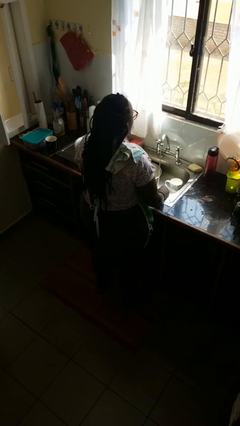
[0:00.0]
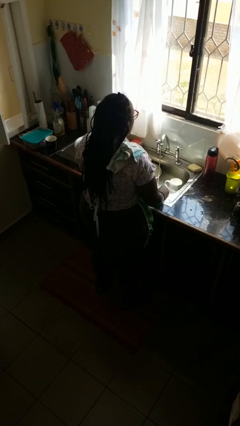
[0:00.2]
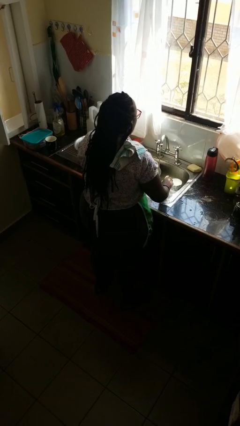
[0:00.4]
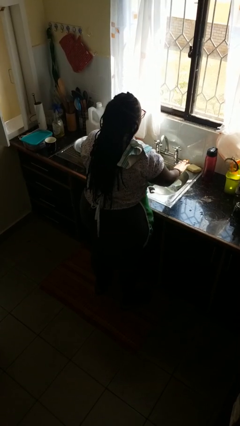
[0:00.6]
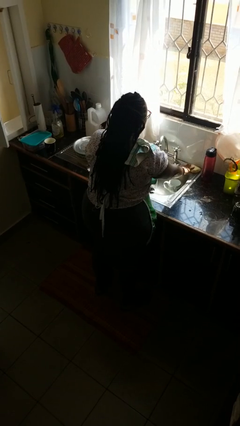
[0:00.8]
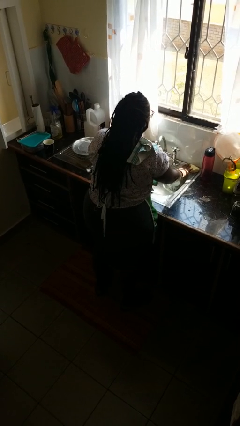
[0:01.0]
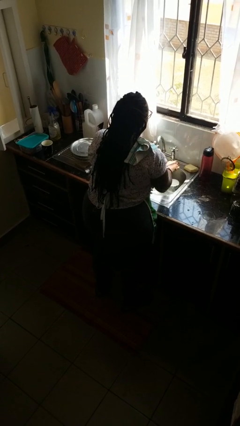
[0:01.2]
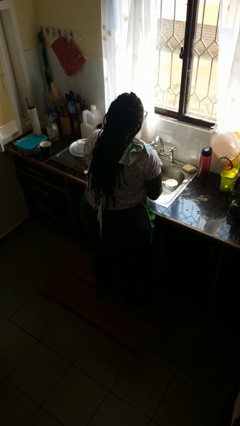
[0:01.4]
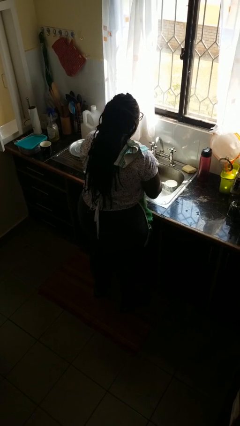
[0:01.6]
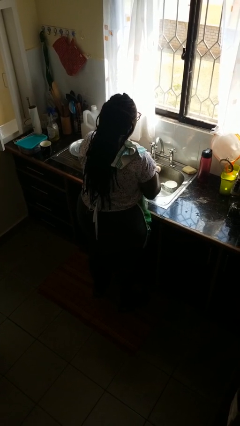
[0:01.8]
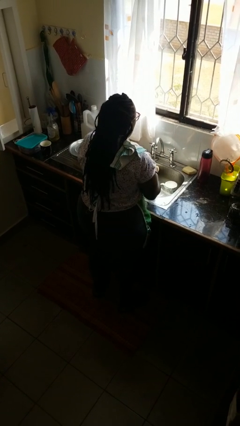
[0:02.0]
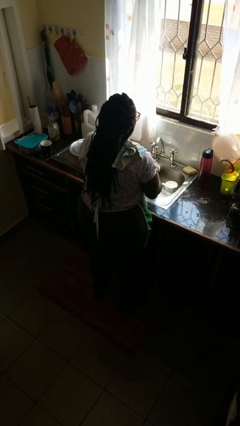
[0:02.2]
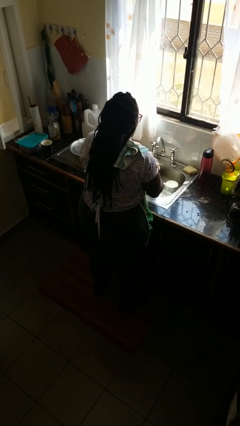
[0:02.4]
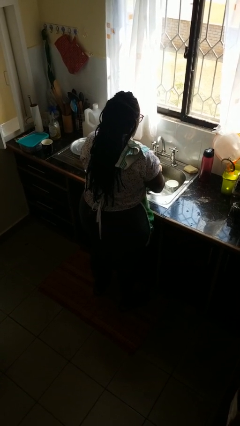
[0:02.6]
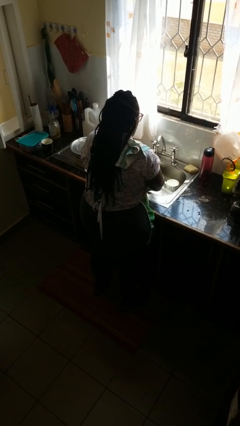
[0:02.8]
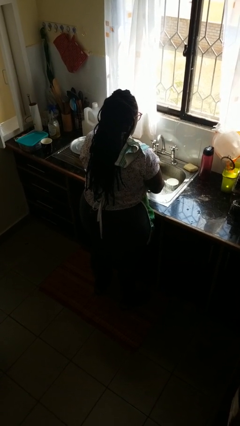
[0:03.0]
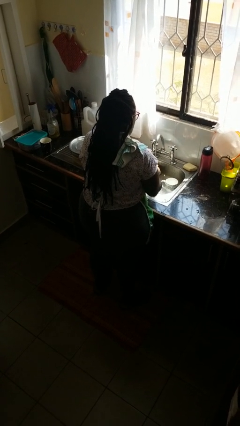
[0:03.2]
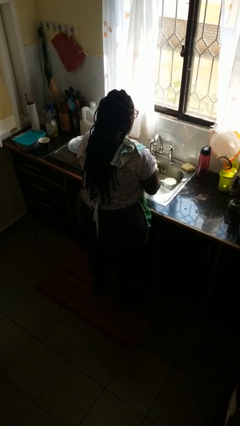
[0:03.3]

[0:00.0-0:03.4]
person washes hands

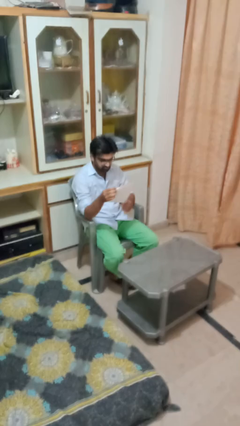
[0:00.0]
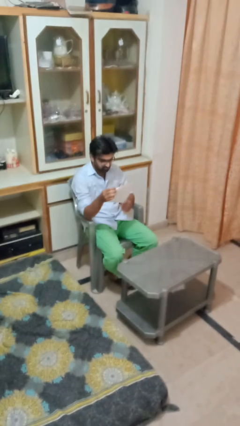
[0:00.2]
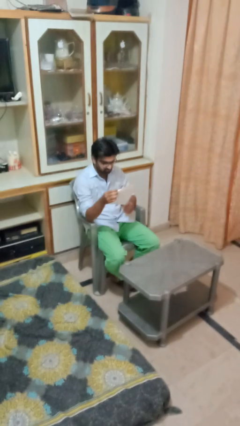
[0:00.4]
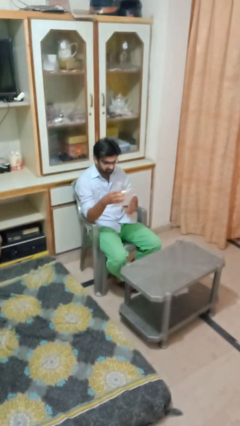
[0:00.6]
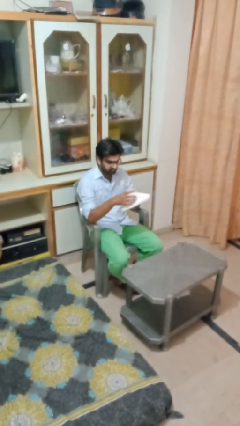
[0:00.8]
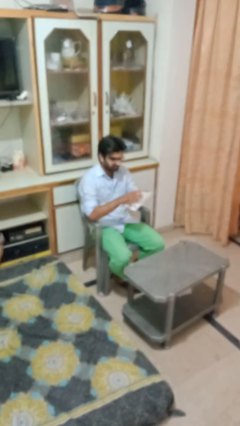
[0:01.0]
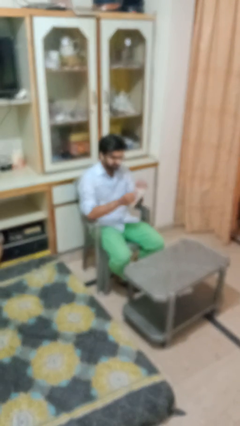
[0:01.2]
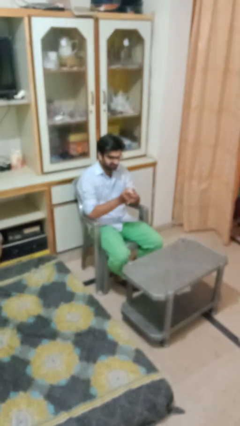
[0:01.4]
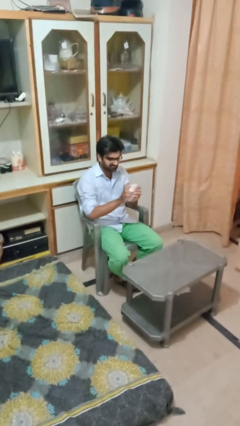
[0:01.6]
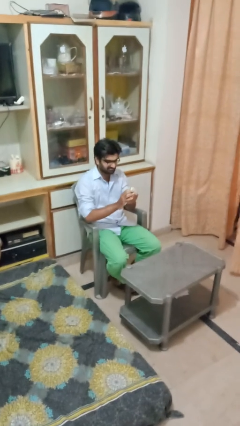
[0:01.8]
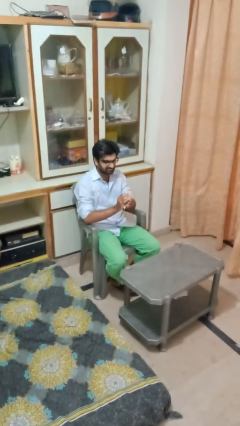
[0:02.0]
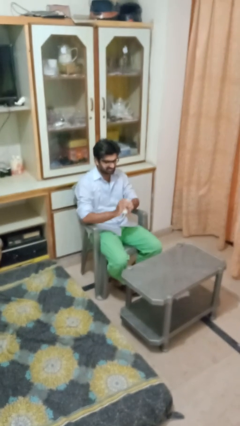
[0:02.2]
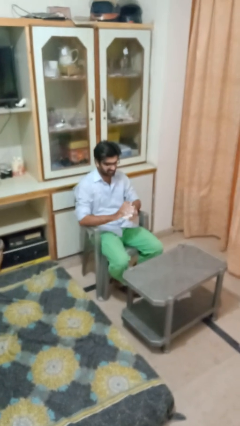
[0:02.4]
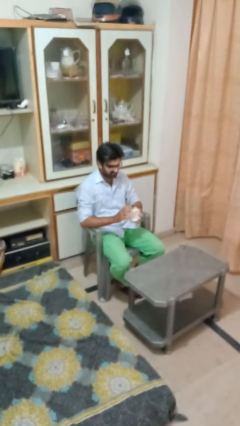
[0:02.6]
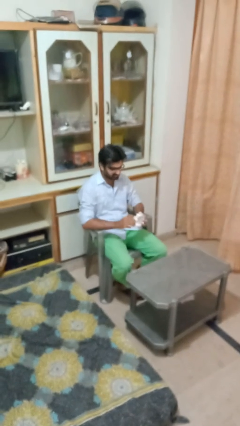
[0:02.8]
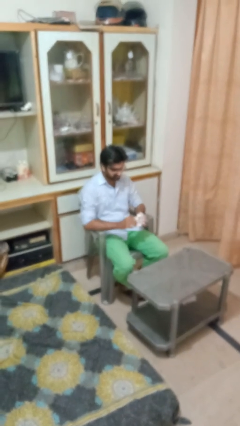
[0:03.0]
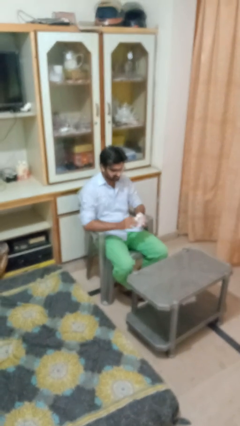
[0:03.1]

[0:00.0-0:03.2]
person crumples paper

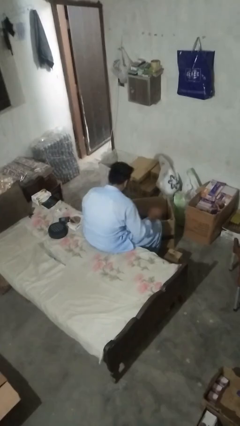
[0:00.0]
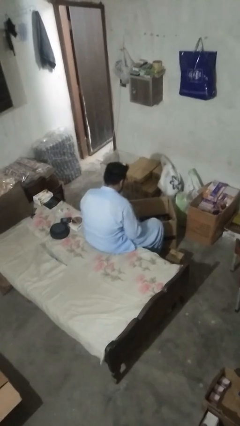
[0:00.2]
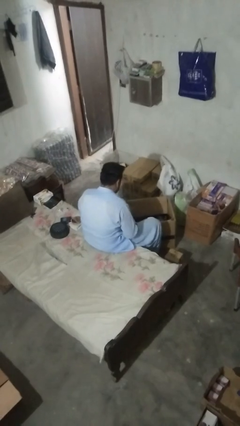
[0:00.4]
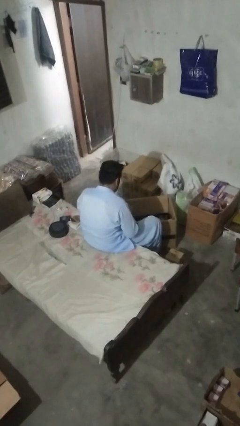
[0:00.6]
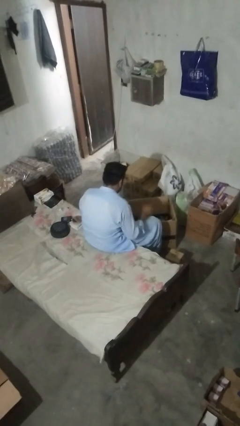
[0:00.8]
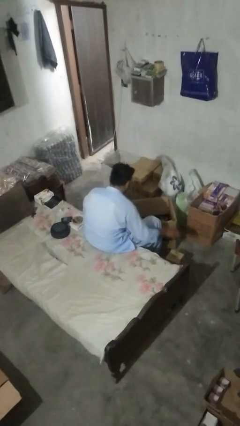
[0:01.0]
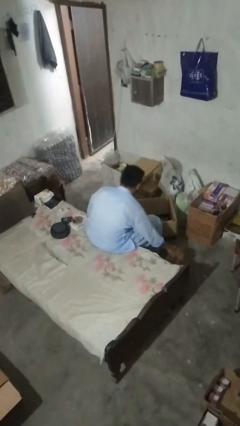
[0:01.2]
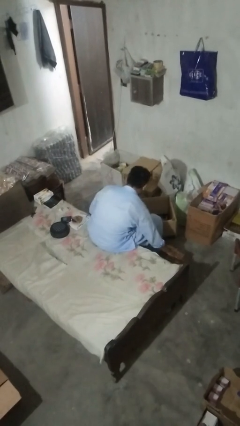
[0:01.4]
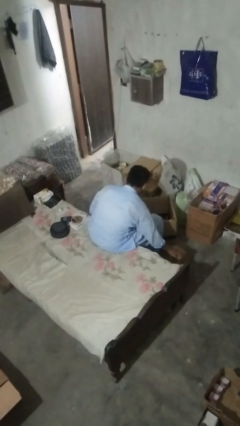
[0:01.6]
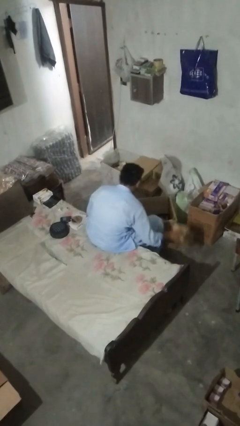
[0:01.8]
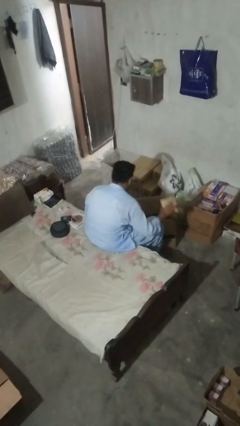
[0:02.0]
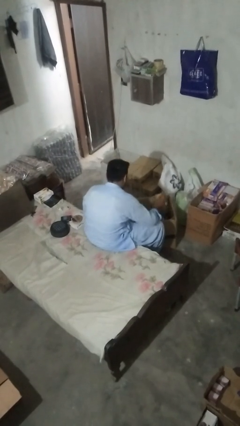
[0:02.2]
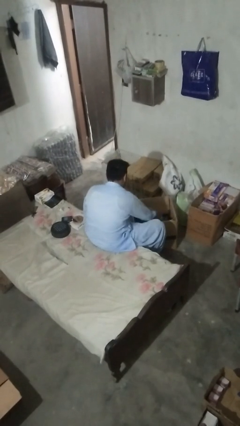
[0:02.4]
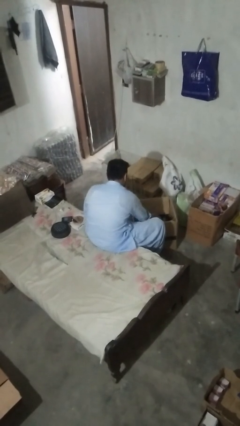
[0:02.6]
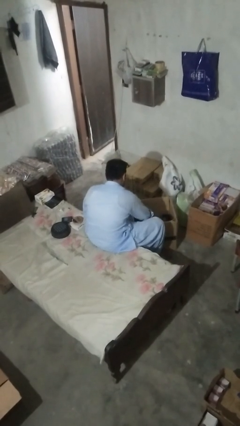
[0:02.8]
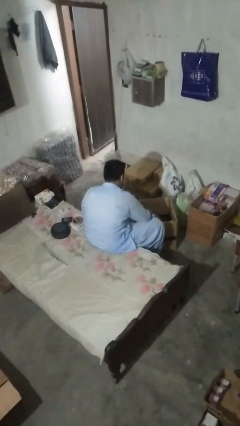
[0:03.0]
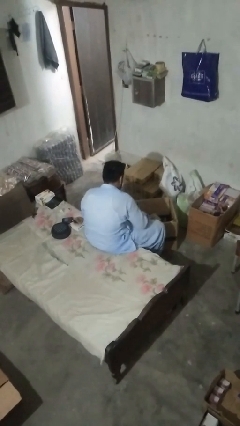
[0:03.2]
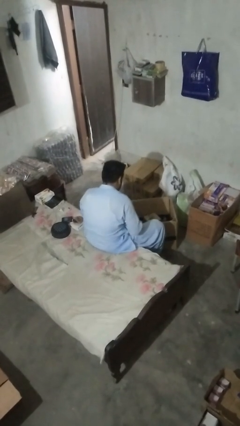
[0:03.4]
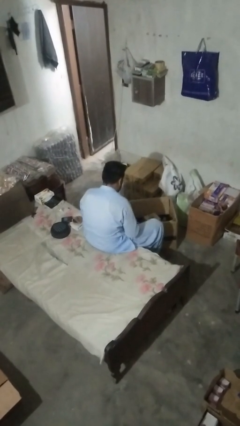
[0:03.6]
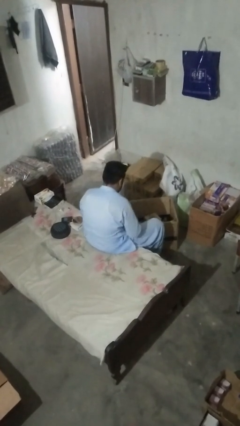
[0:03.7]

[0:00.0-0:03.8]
person puts object into box

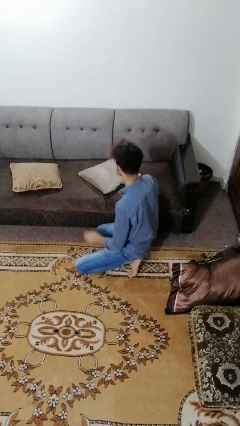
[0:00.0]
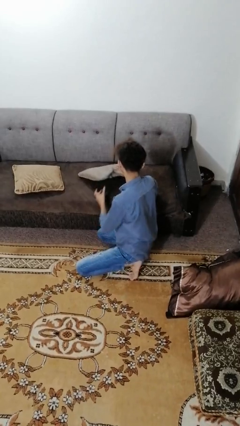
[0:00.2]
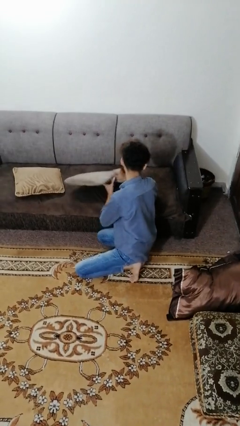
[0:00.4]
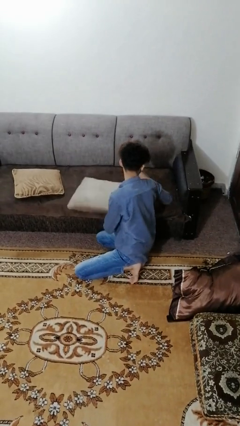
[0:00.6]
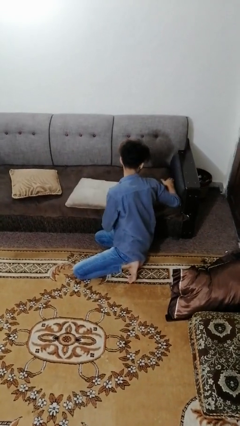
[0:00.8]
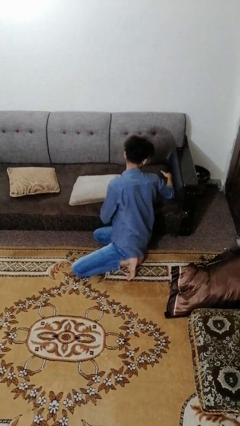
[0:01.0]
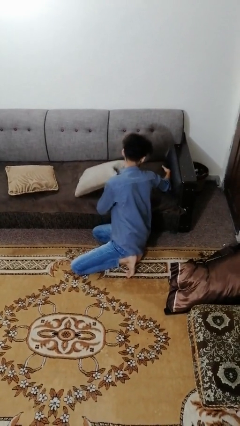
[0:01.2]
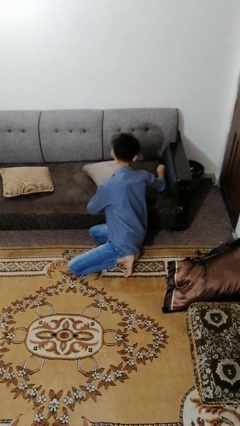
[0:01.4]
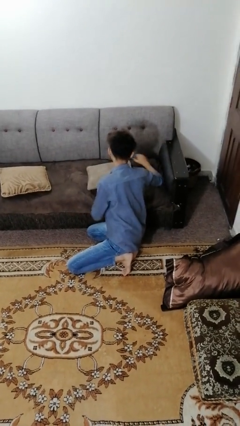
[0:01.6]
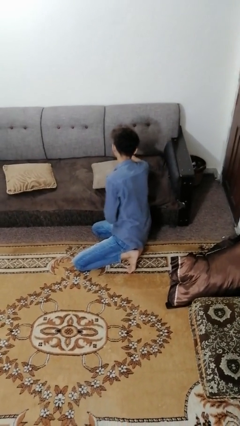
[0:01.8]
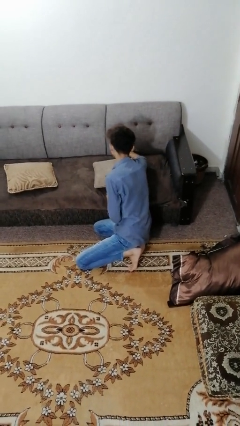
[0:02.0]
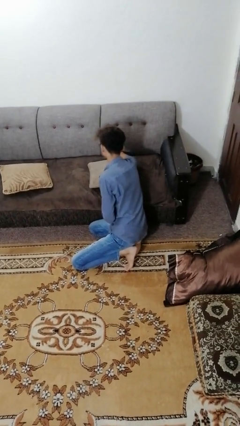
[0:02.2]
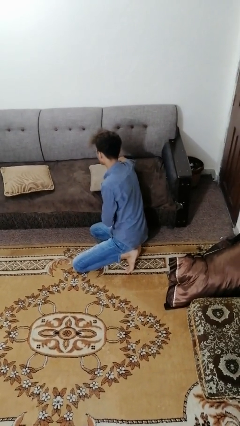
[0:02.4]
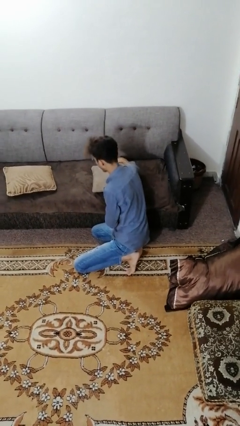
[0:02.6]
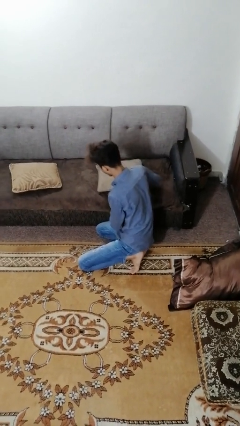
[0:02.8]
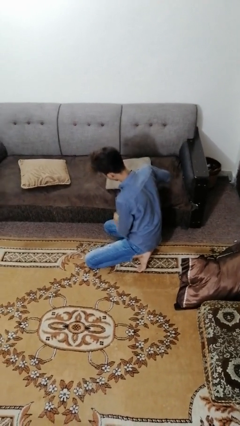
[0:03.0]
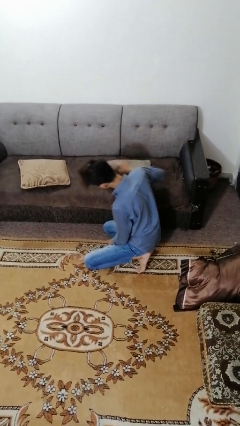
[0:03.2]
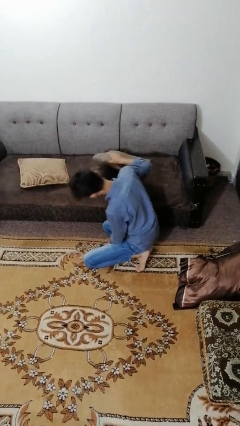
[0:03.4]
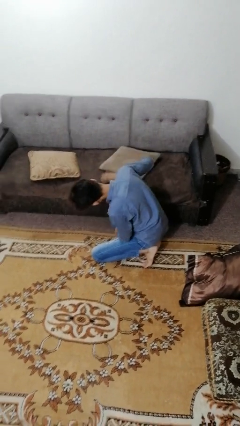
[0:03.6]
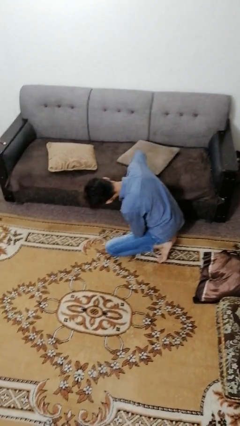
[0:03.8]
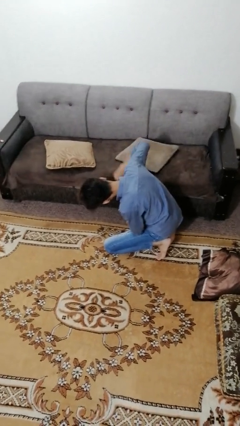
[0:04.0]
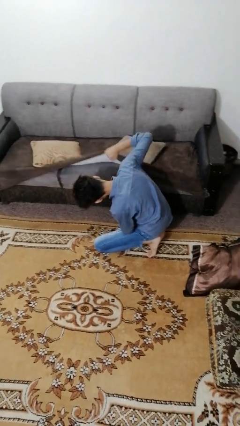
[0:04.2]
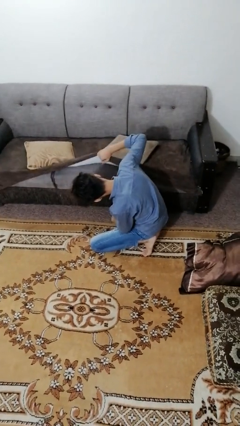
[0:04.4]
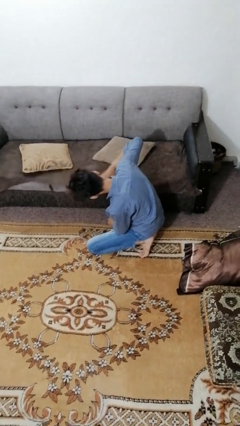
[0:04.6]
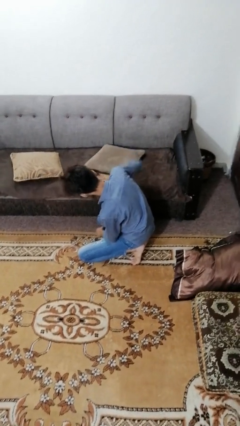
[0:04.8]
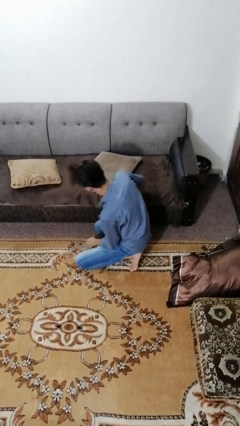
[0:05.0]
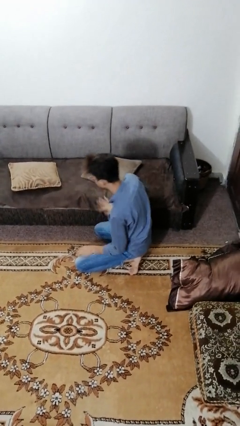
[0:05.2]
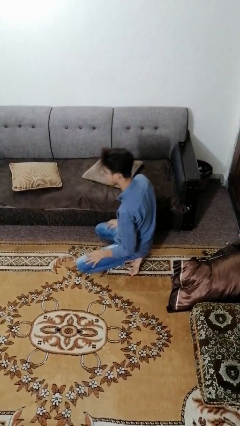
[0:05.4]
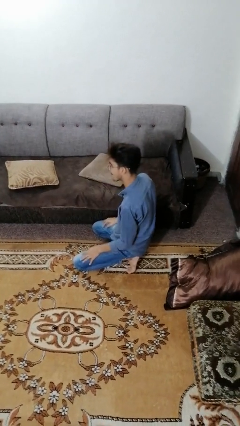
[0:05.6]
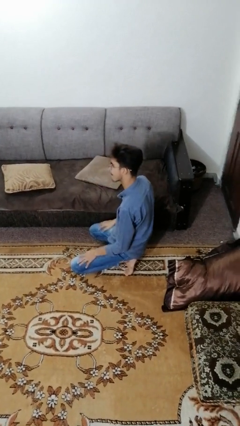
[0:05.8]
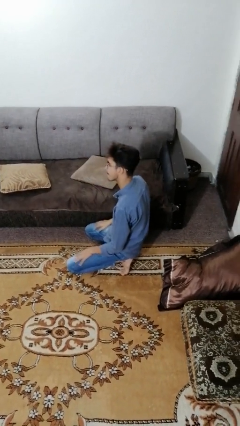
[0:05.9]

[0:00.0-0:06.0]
person searches in couch

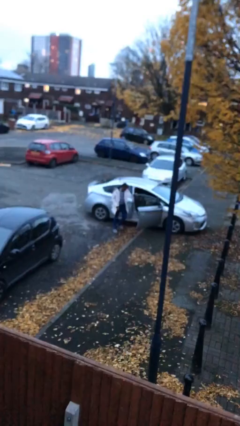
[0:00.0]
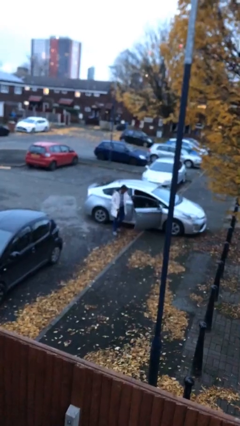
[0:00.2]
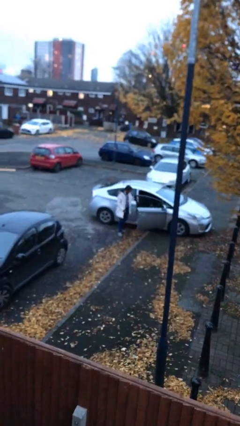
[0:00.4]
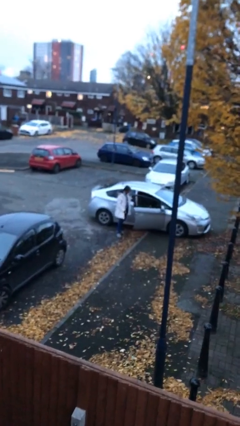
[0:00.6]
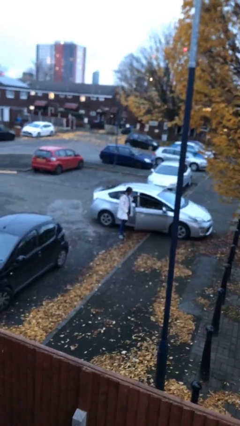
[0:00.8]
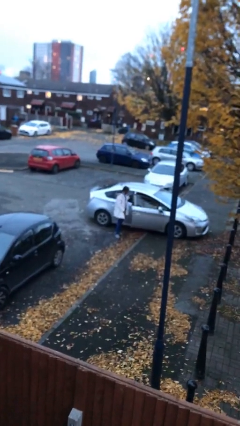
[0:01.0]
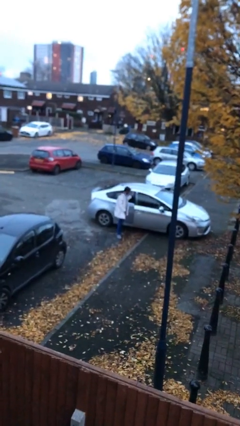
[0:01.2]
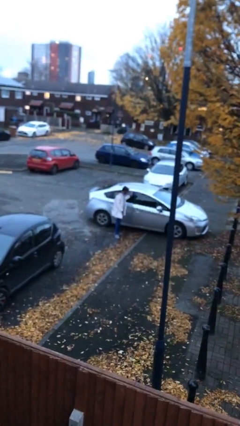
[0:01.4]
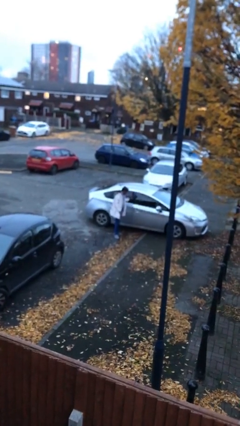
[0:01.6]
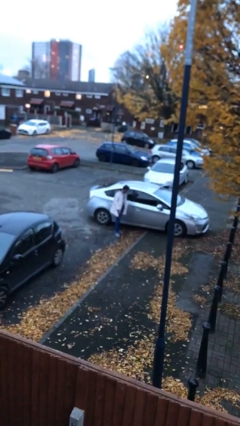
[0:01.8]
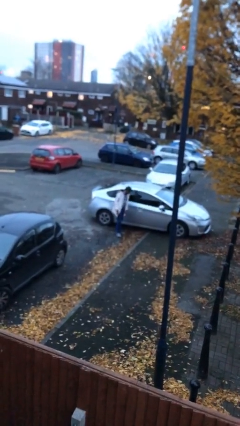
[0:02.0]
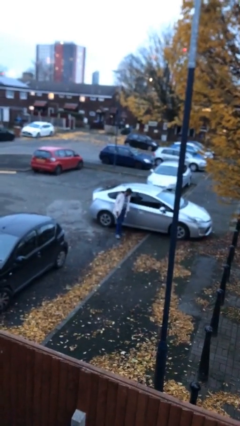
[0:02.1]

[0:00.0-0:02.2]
person closes car door
